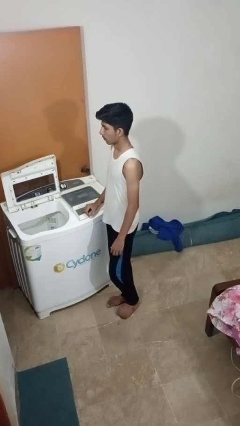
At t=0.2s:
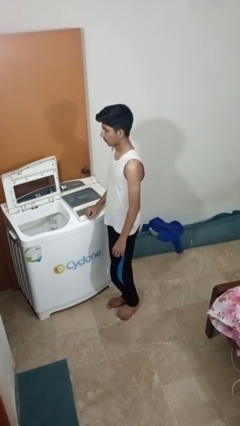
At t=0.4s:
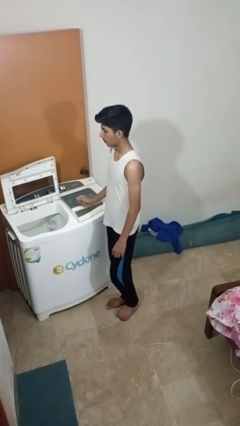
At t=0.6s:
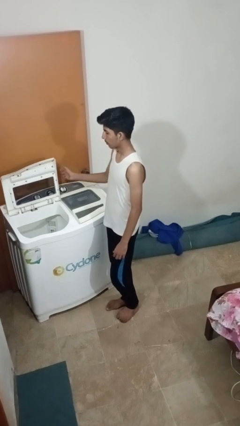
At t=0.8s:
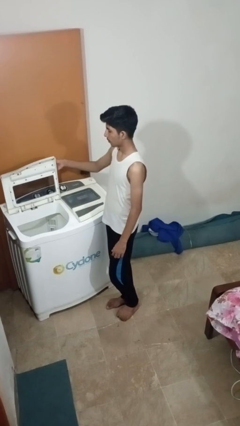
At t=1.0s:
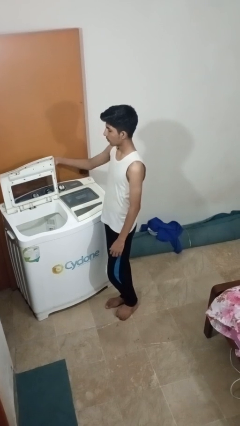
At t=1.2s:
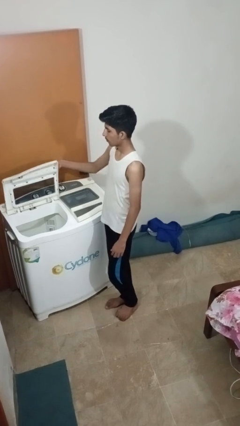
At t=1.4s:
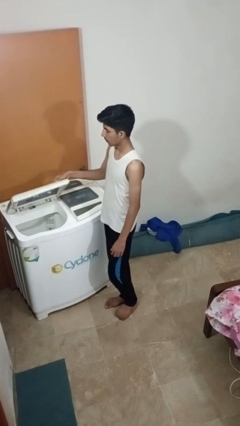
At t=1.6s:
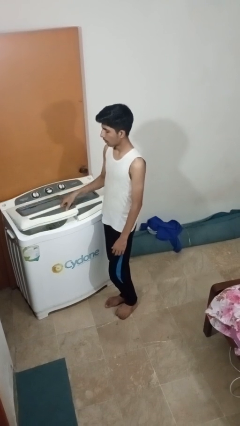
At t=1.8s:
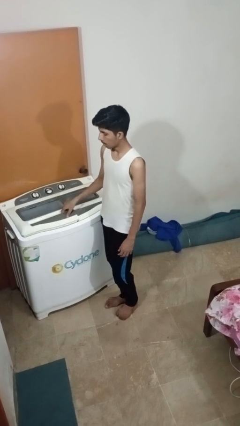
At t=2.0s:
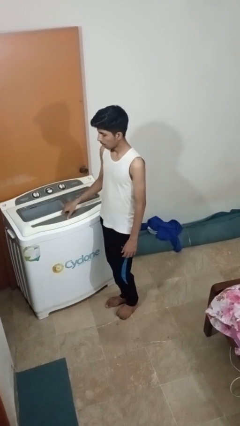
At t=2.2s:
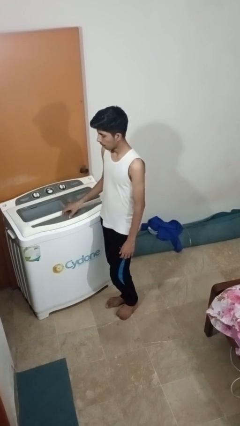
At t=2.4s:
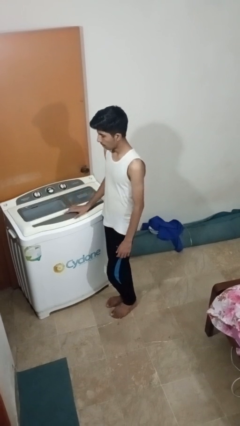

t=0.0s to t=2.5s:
person closes clothes washer

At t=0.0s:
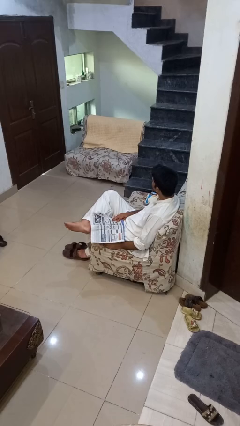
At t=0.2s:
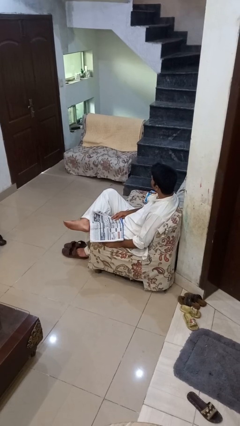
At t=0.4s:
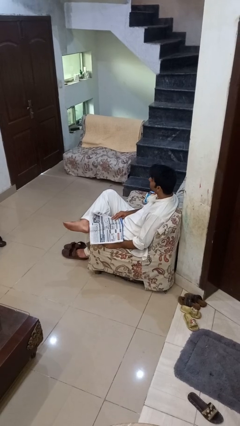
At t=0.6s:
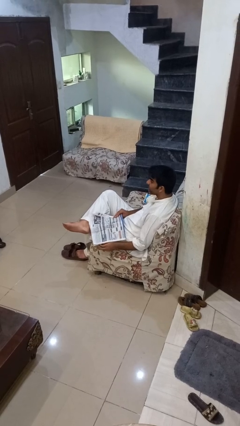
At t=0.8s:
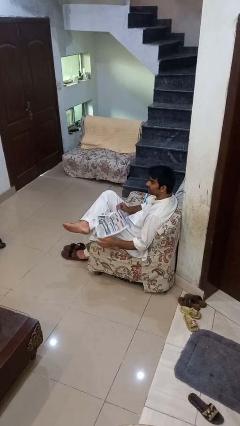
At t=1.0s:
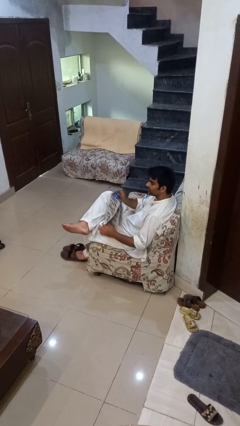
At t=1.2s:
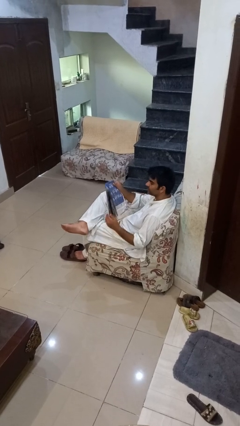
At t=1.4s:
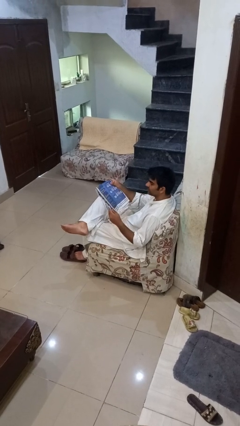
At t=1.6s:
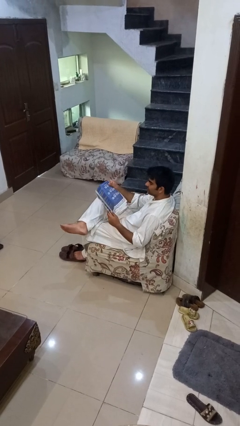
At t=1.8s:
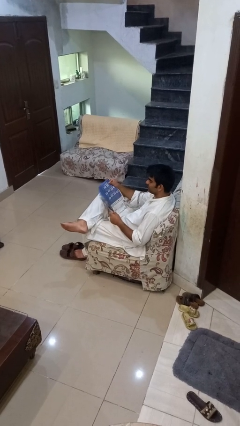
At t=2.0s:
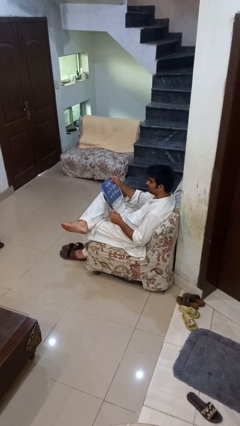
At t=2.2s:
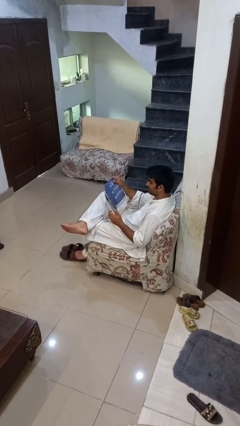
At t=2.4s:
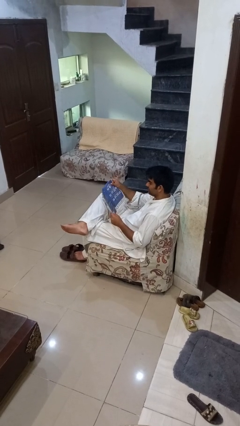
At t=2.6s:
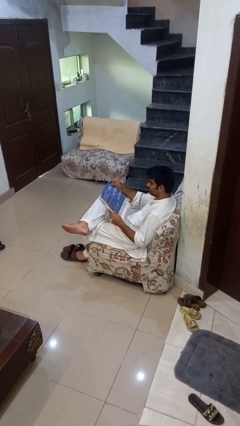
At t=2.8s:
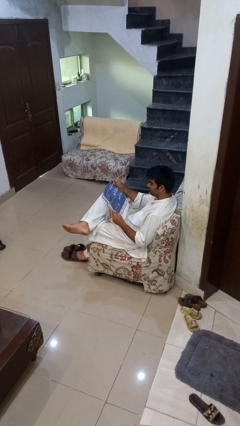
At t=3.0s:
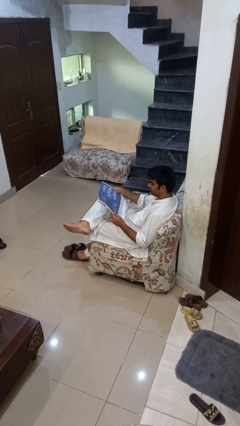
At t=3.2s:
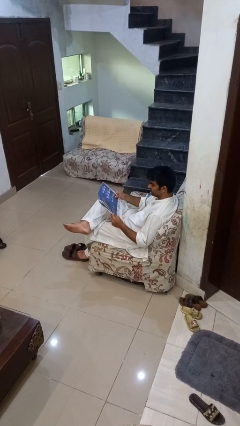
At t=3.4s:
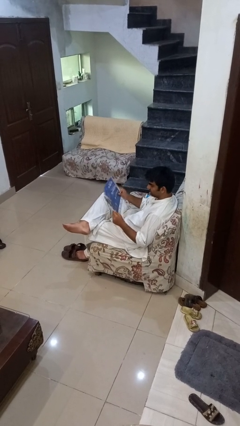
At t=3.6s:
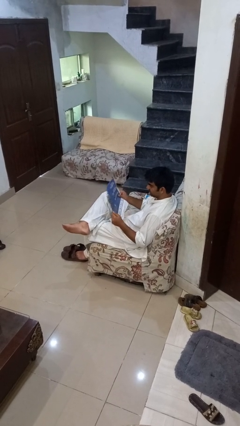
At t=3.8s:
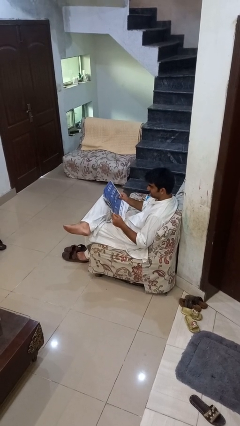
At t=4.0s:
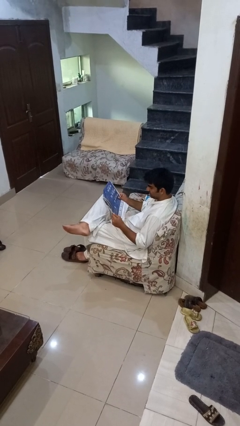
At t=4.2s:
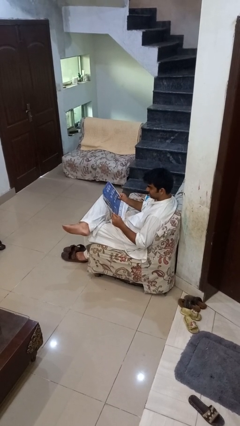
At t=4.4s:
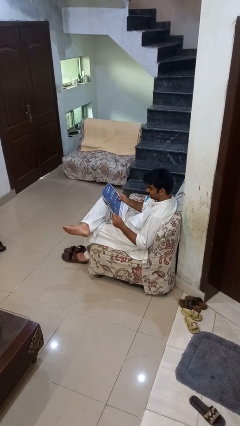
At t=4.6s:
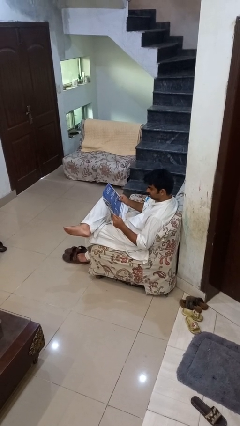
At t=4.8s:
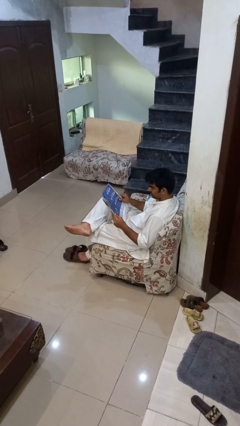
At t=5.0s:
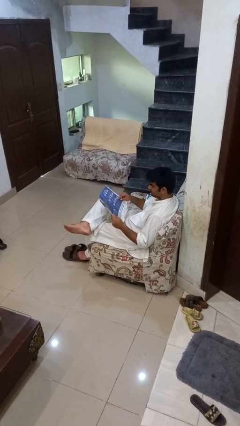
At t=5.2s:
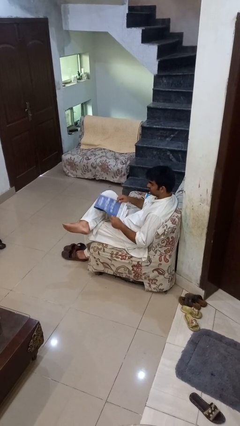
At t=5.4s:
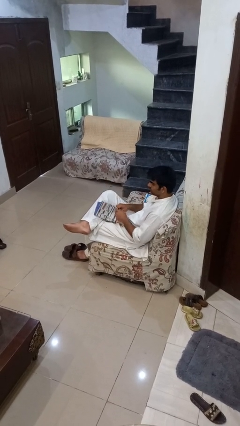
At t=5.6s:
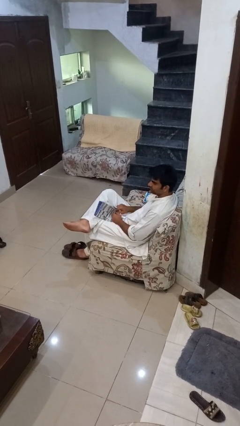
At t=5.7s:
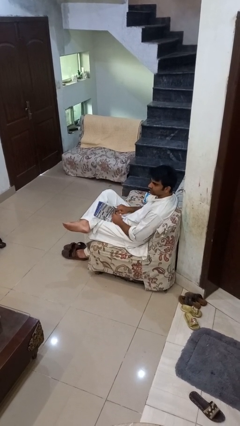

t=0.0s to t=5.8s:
person reads newspaper

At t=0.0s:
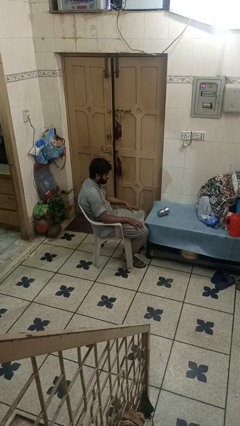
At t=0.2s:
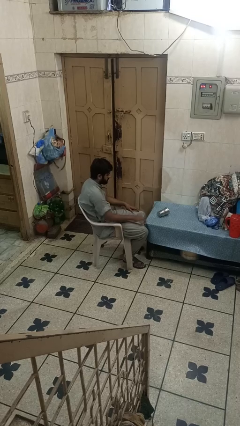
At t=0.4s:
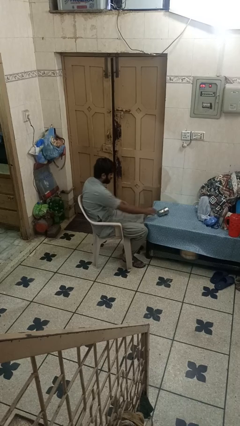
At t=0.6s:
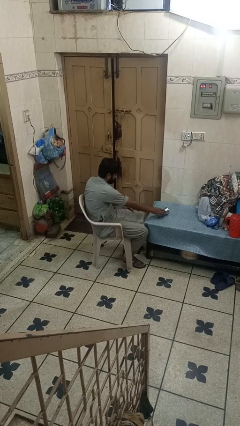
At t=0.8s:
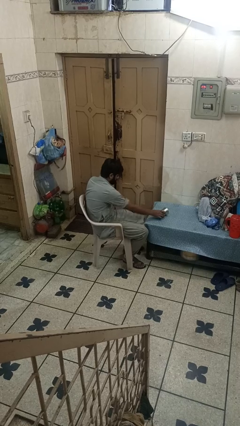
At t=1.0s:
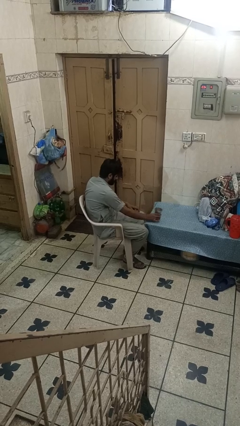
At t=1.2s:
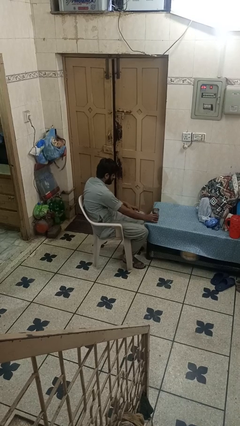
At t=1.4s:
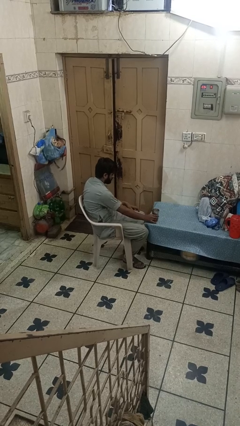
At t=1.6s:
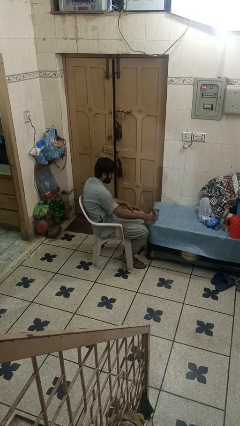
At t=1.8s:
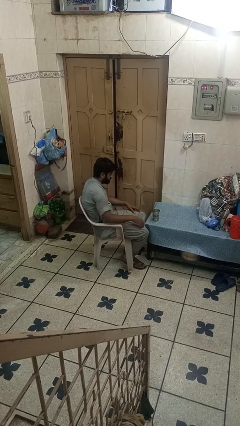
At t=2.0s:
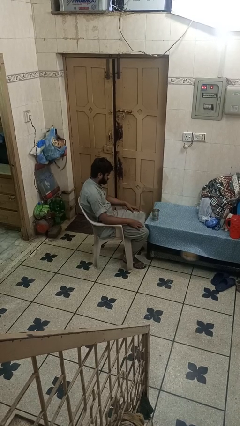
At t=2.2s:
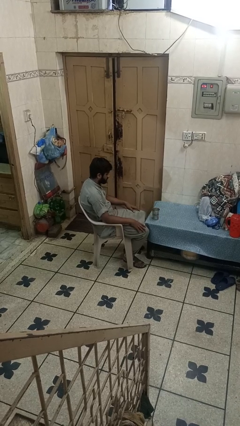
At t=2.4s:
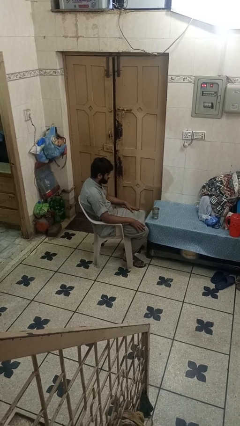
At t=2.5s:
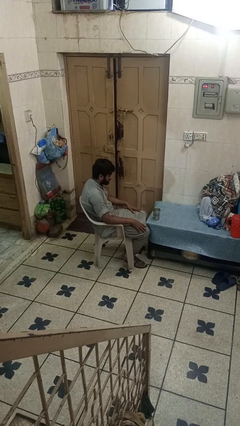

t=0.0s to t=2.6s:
person sets upright glass

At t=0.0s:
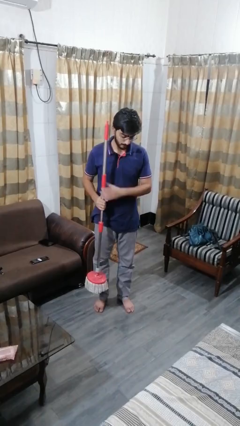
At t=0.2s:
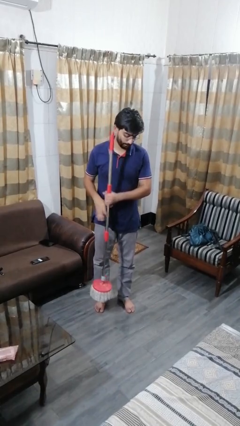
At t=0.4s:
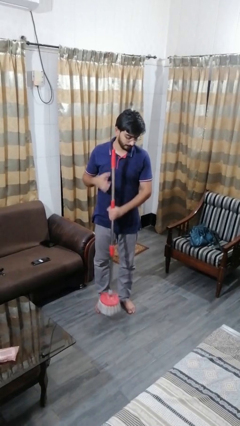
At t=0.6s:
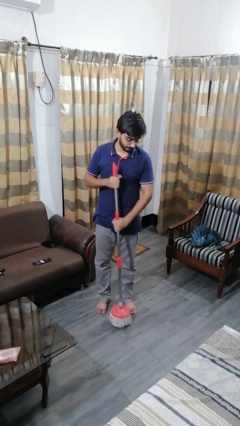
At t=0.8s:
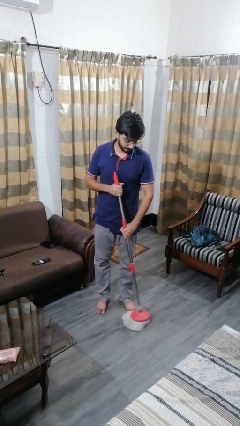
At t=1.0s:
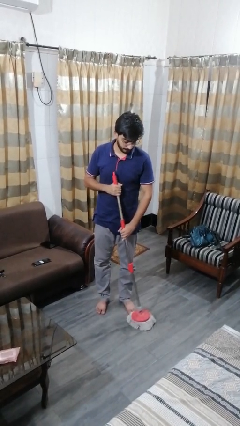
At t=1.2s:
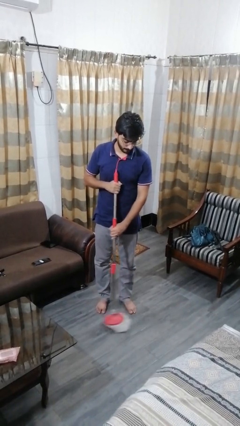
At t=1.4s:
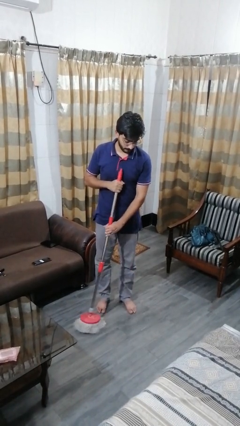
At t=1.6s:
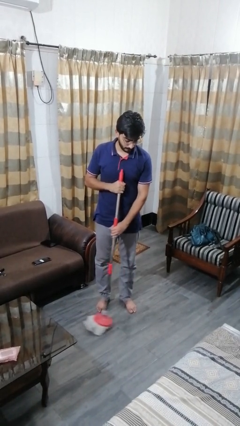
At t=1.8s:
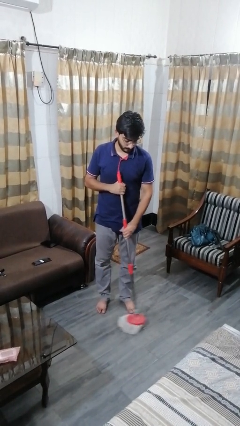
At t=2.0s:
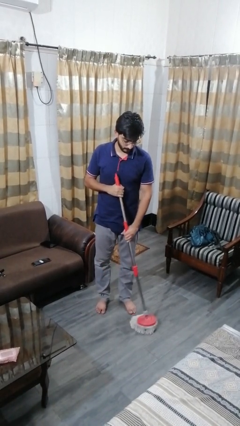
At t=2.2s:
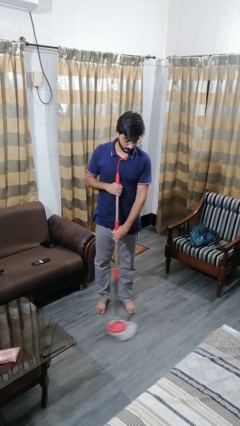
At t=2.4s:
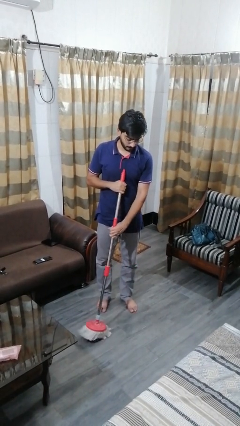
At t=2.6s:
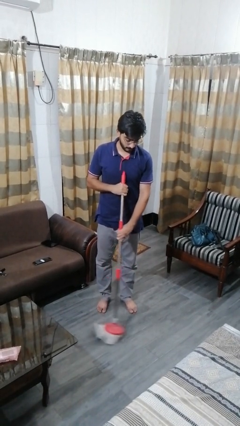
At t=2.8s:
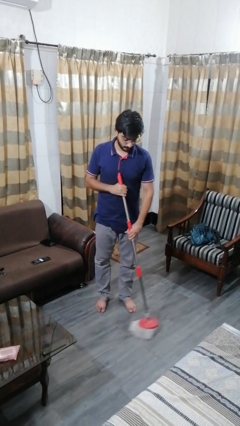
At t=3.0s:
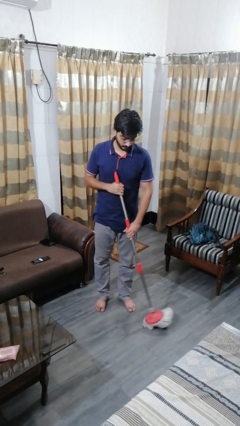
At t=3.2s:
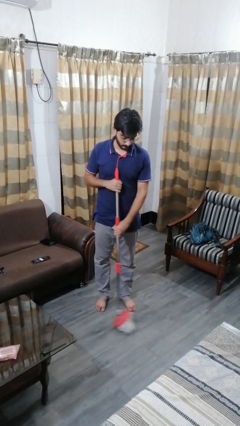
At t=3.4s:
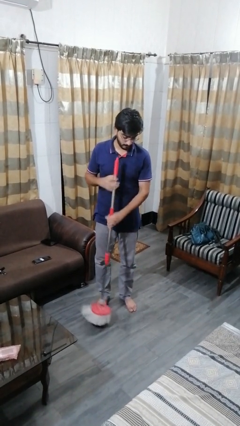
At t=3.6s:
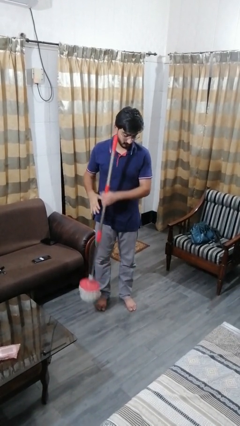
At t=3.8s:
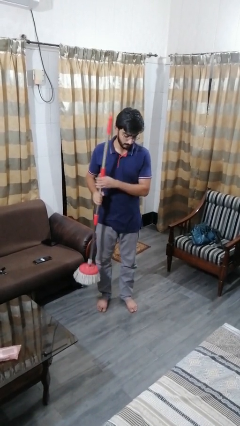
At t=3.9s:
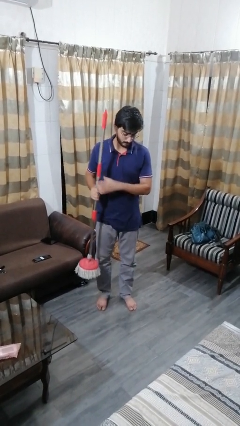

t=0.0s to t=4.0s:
person sweeps floor

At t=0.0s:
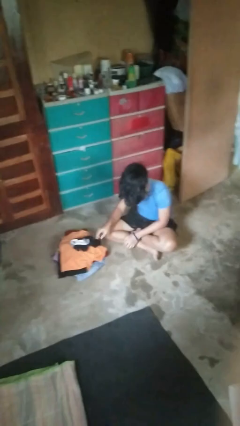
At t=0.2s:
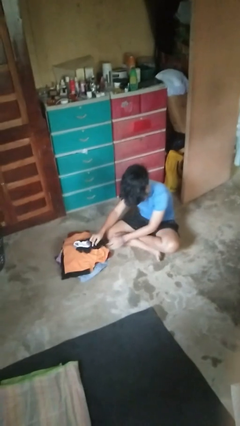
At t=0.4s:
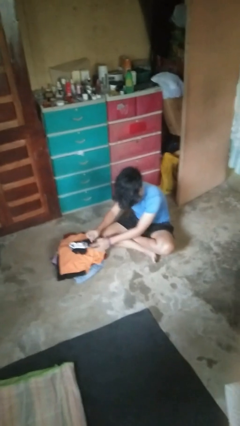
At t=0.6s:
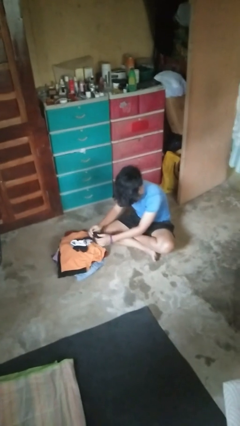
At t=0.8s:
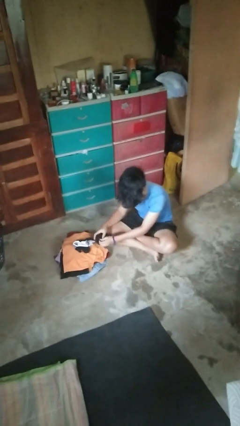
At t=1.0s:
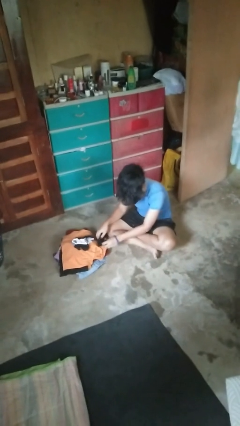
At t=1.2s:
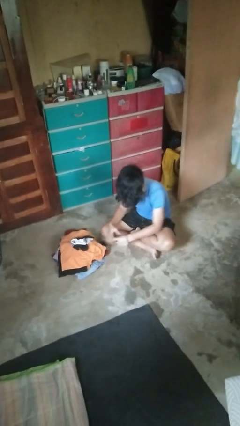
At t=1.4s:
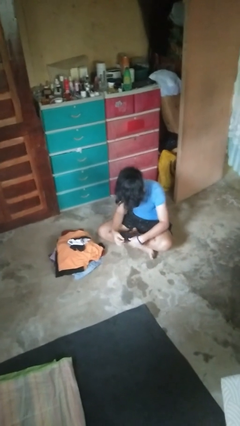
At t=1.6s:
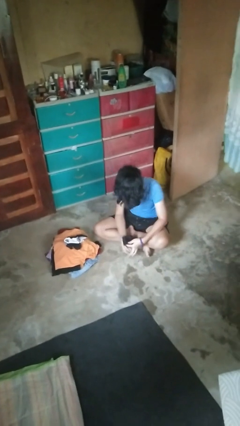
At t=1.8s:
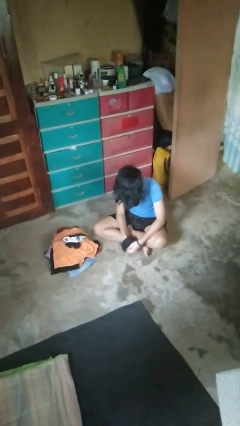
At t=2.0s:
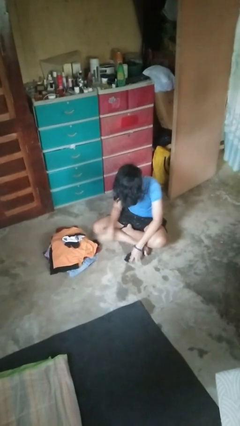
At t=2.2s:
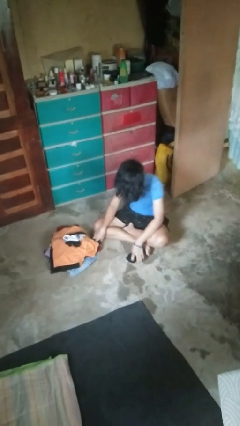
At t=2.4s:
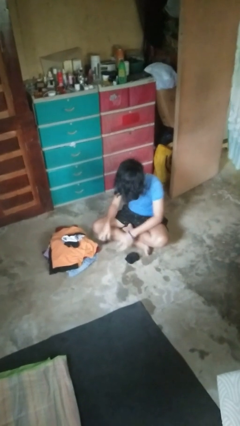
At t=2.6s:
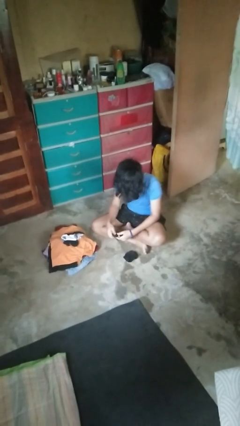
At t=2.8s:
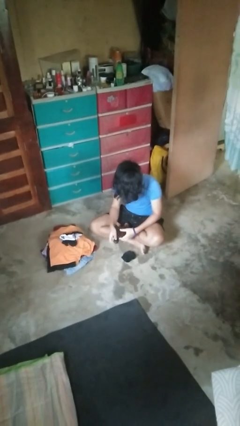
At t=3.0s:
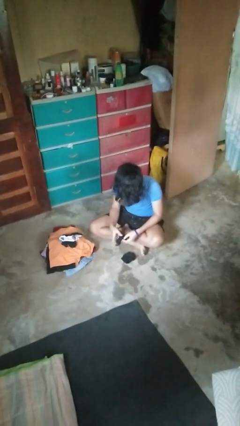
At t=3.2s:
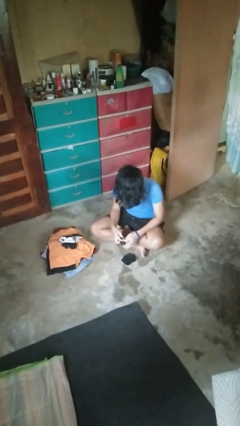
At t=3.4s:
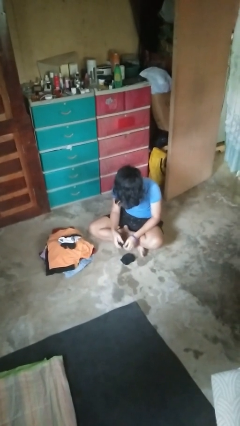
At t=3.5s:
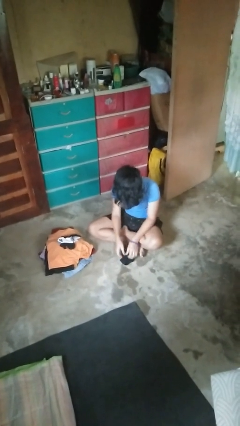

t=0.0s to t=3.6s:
person folds socks
